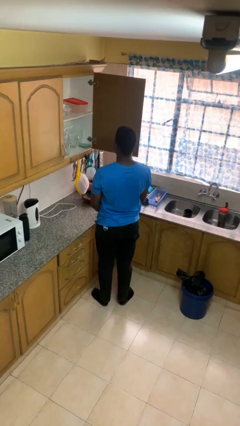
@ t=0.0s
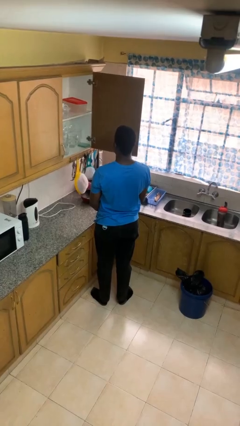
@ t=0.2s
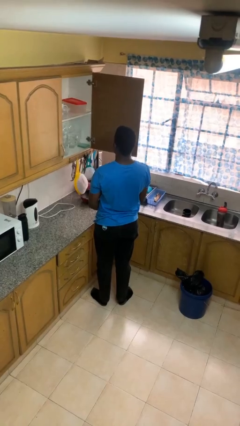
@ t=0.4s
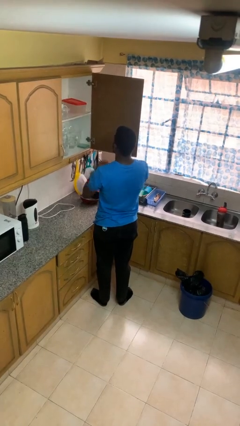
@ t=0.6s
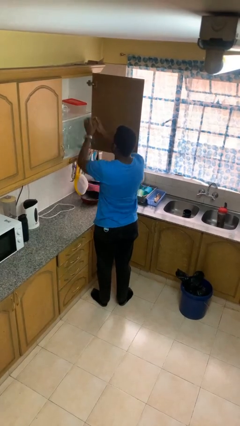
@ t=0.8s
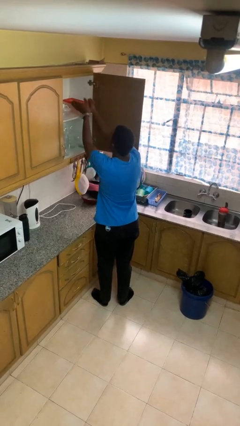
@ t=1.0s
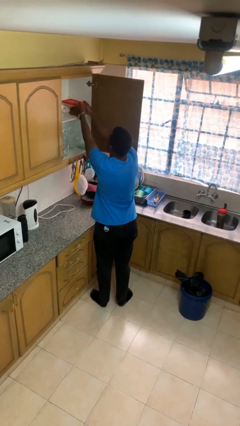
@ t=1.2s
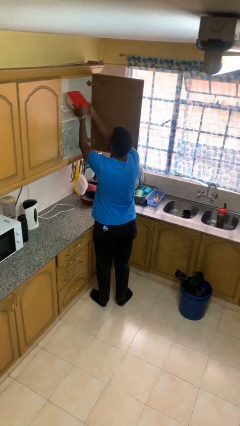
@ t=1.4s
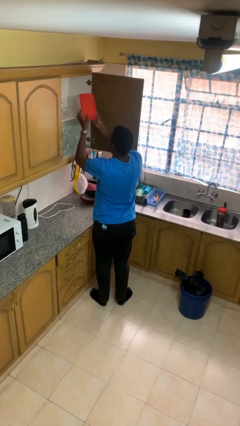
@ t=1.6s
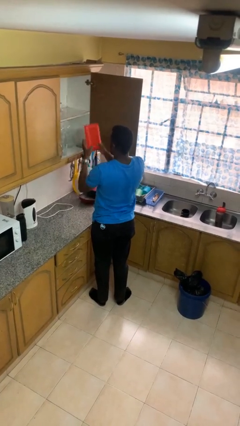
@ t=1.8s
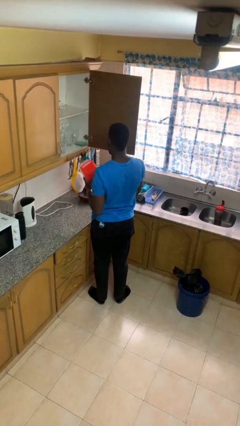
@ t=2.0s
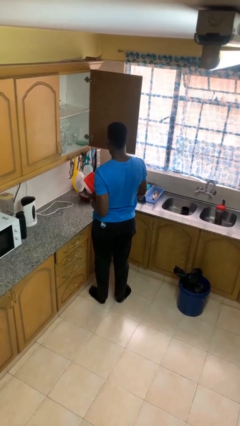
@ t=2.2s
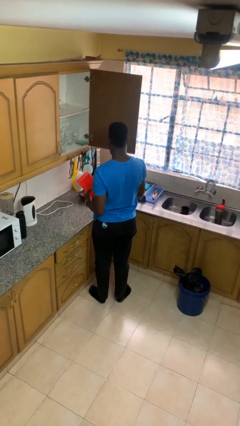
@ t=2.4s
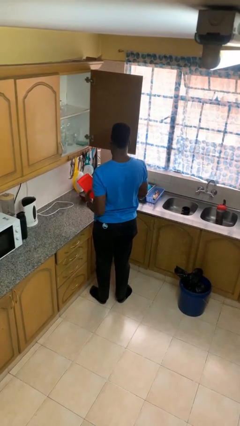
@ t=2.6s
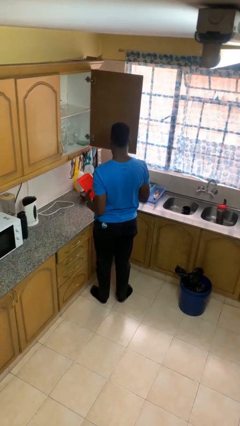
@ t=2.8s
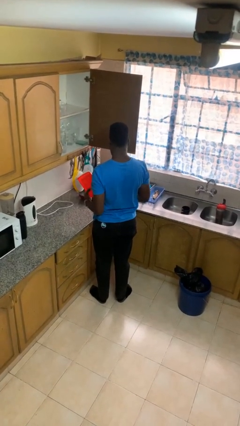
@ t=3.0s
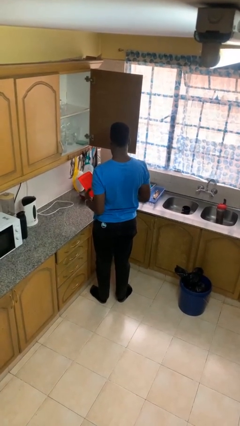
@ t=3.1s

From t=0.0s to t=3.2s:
person picks up object from cabinet

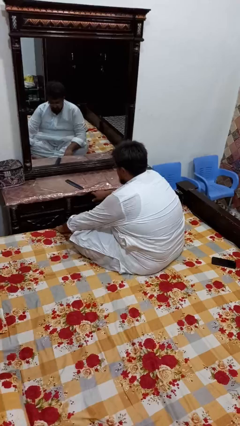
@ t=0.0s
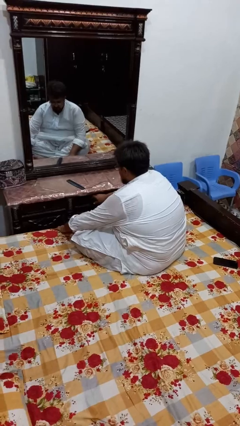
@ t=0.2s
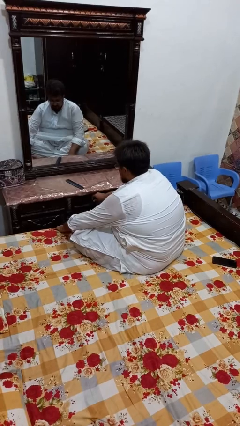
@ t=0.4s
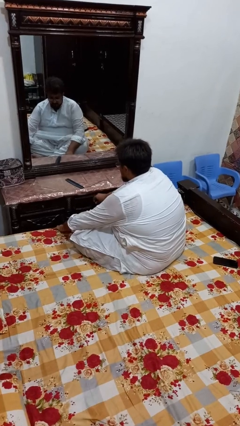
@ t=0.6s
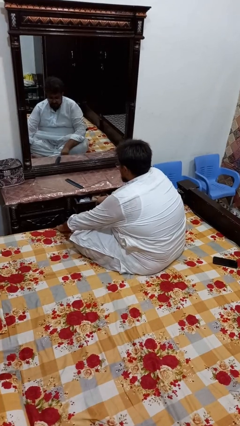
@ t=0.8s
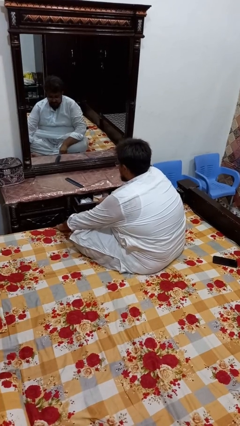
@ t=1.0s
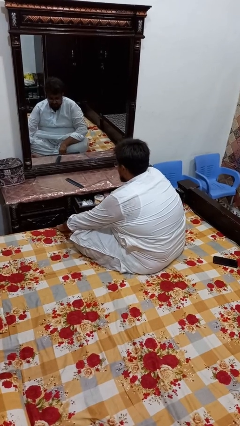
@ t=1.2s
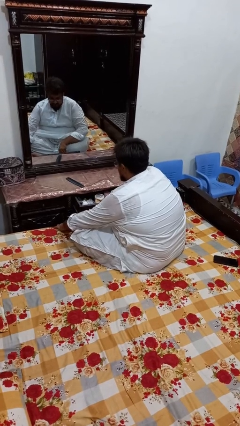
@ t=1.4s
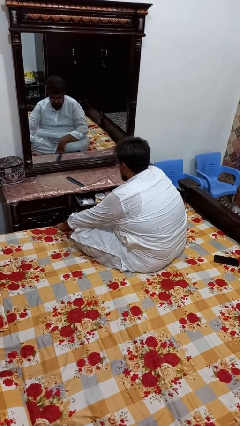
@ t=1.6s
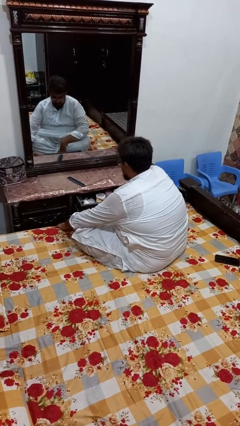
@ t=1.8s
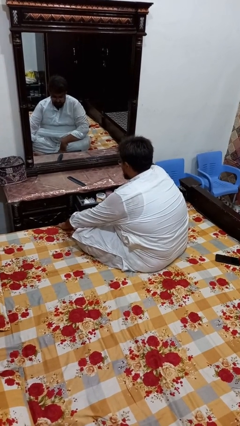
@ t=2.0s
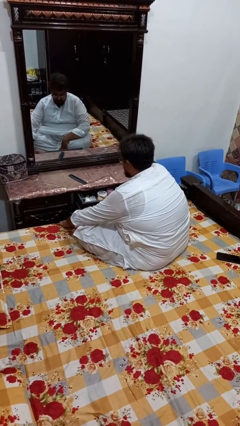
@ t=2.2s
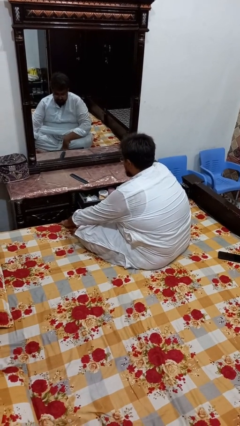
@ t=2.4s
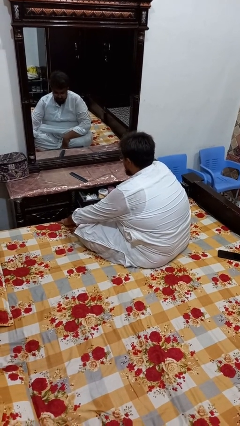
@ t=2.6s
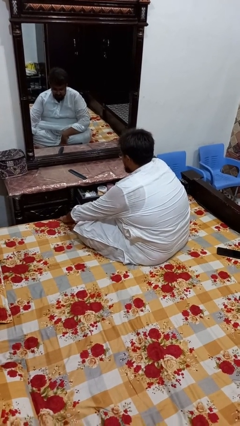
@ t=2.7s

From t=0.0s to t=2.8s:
person opens dresser drawer

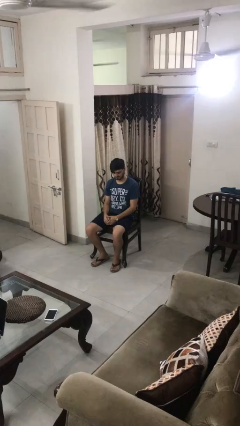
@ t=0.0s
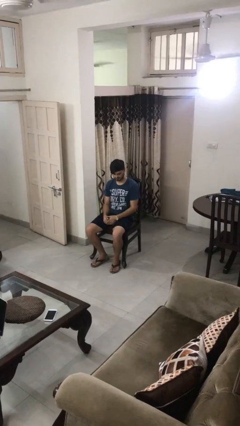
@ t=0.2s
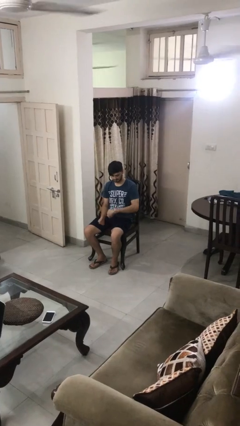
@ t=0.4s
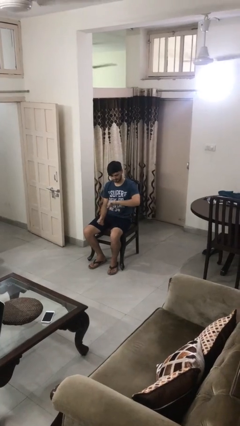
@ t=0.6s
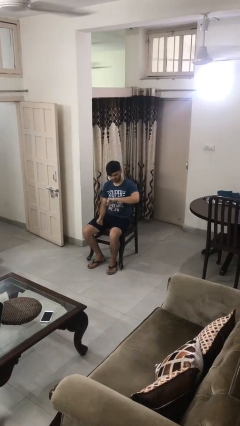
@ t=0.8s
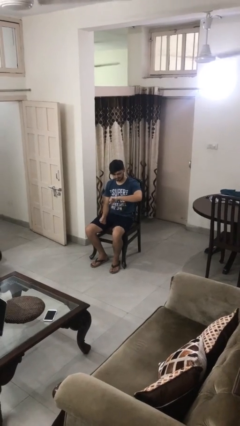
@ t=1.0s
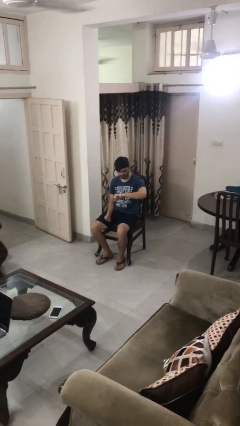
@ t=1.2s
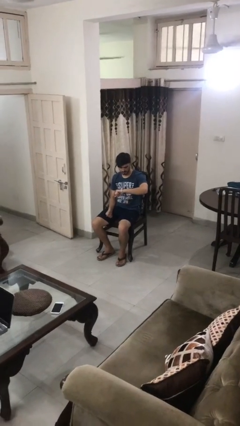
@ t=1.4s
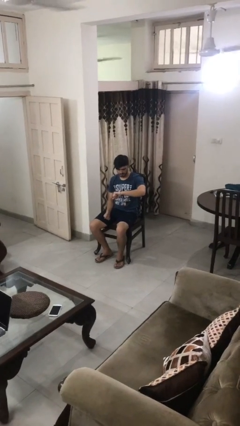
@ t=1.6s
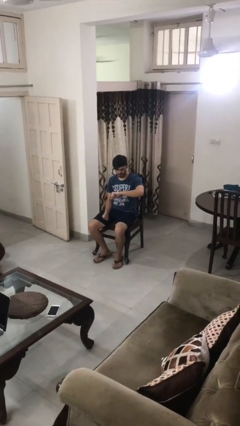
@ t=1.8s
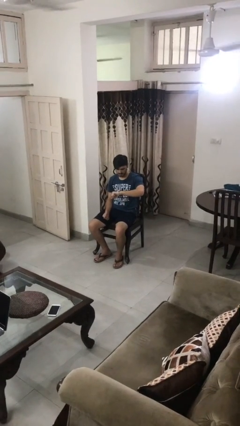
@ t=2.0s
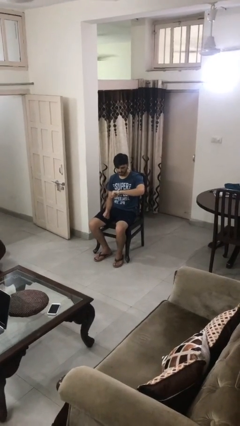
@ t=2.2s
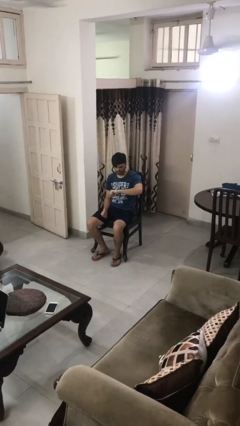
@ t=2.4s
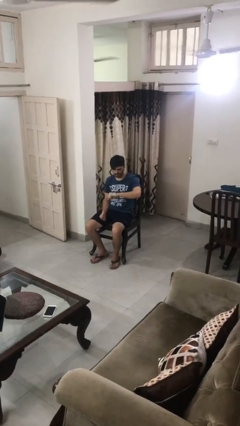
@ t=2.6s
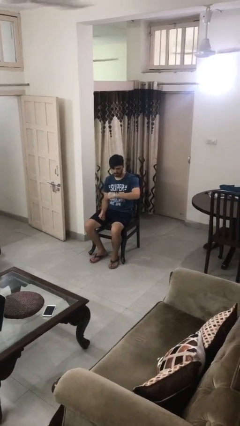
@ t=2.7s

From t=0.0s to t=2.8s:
person looks at wristwatch

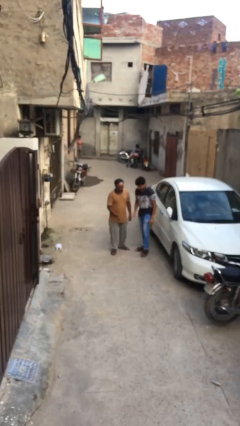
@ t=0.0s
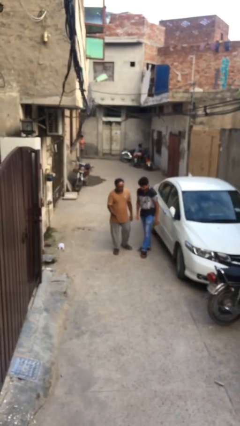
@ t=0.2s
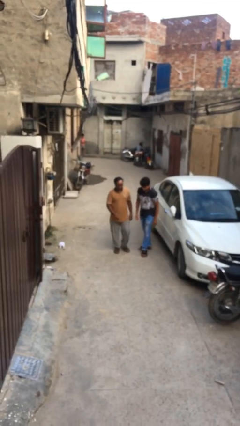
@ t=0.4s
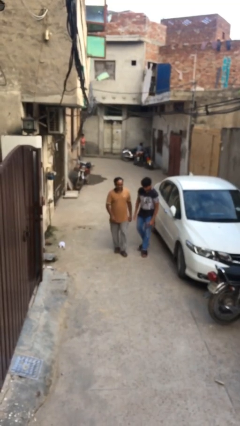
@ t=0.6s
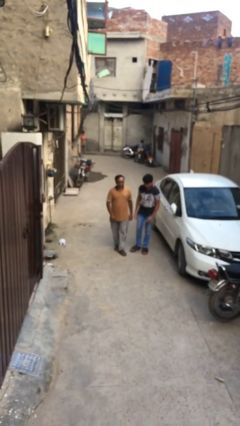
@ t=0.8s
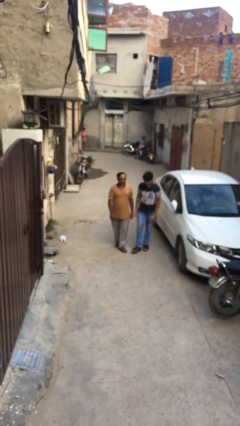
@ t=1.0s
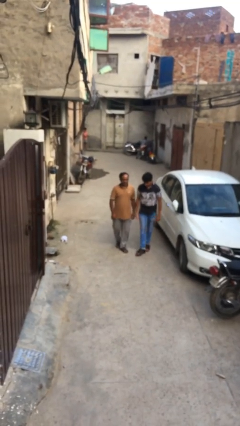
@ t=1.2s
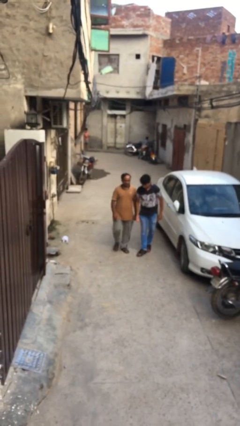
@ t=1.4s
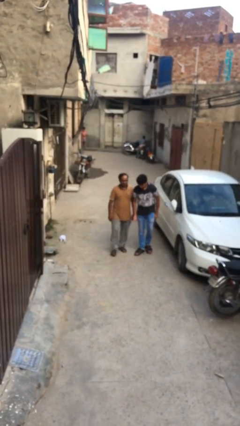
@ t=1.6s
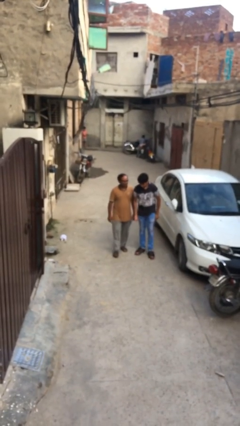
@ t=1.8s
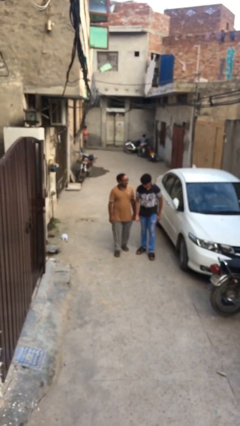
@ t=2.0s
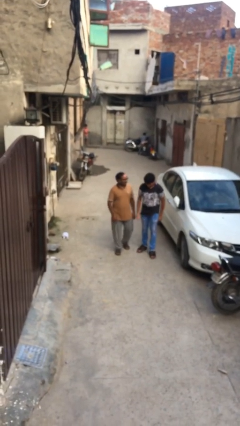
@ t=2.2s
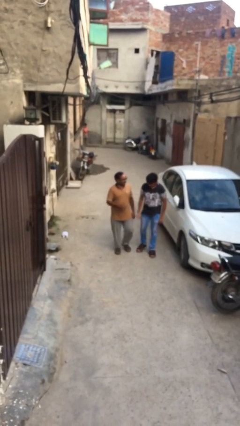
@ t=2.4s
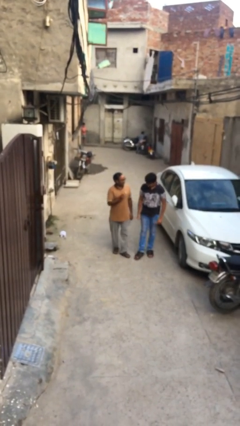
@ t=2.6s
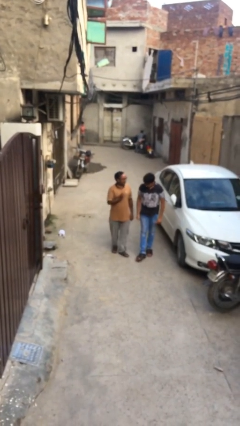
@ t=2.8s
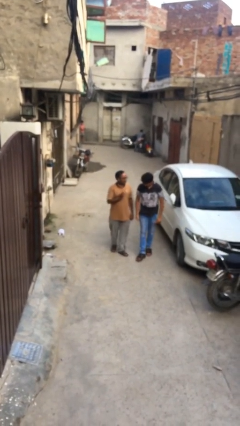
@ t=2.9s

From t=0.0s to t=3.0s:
person talks to person

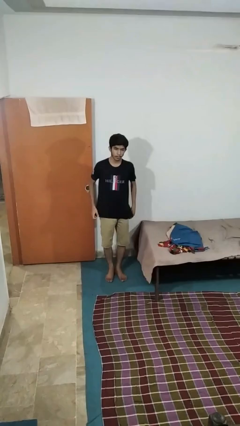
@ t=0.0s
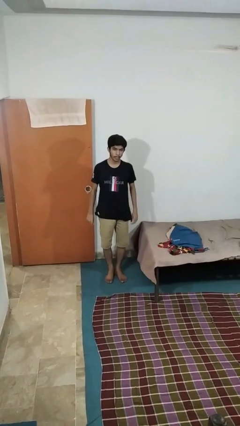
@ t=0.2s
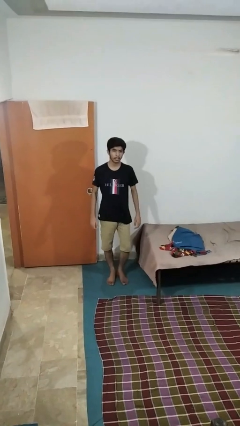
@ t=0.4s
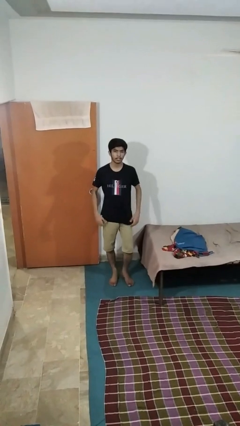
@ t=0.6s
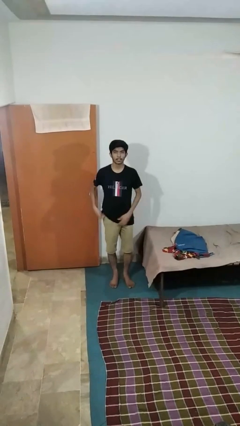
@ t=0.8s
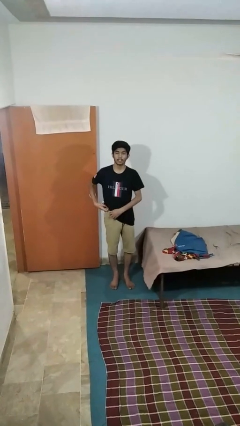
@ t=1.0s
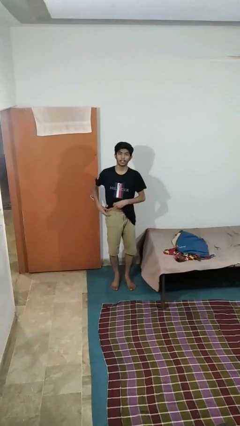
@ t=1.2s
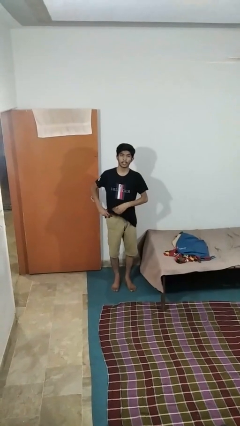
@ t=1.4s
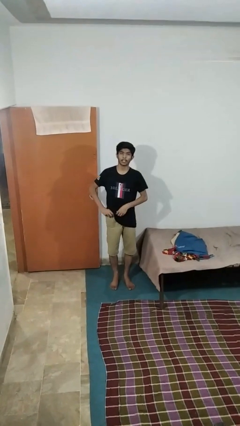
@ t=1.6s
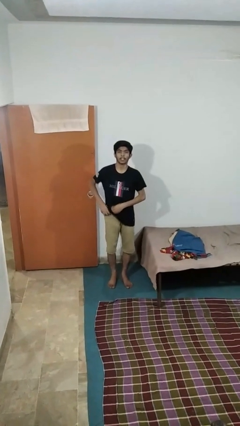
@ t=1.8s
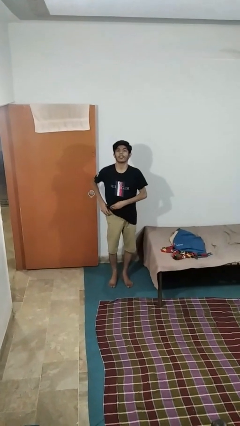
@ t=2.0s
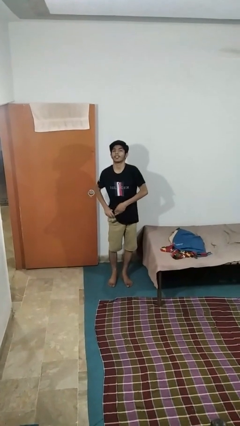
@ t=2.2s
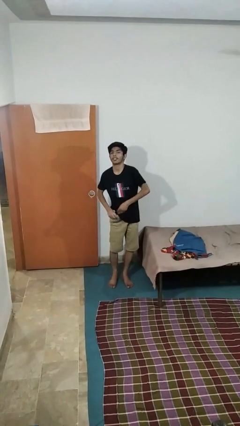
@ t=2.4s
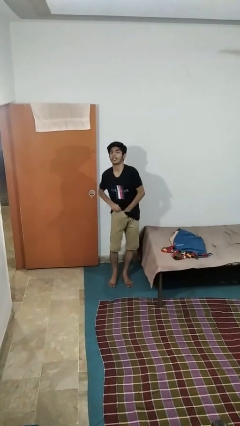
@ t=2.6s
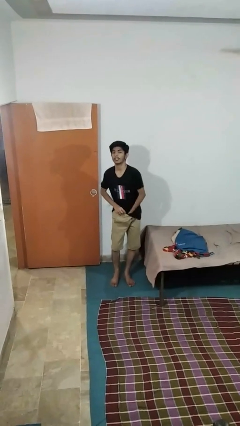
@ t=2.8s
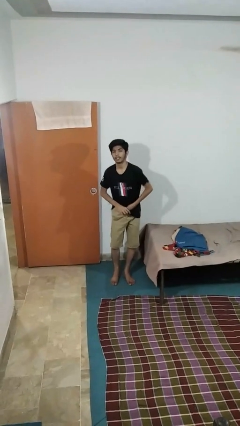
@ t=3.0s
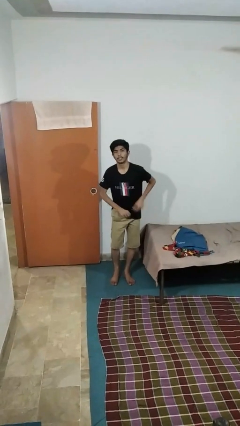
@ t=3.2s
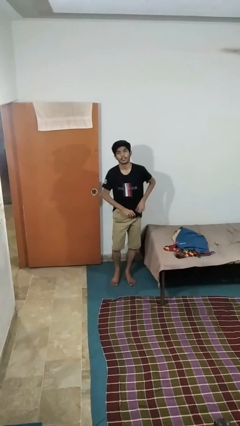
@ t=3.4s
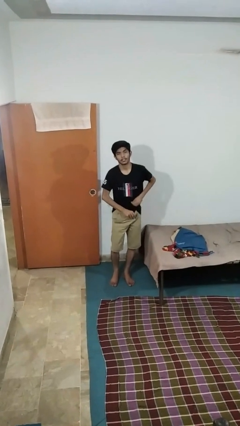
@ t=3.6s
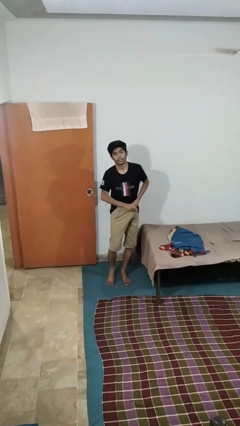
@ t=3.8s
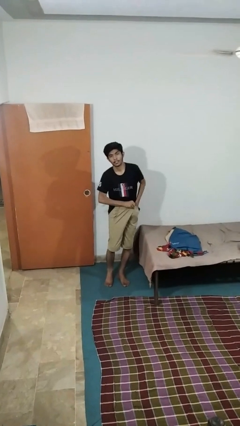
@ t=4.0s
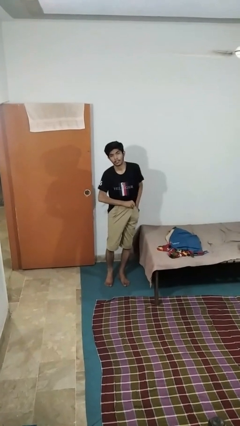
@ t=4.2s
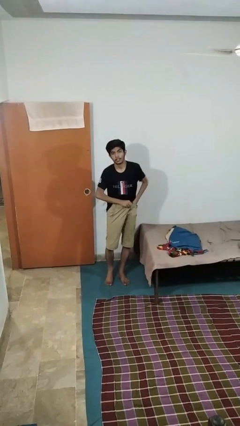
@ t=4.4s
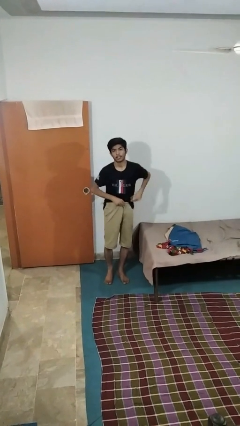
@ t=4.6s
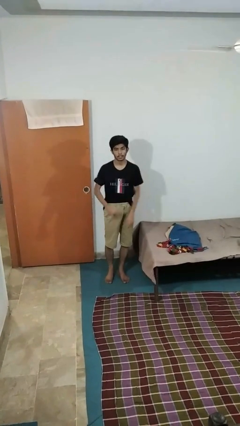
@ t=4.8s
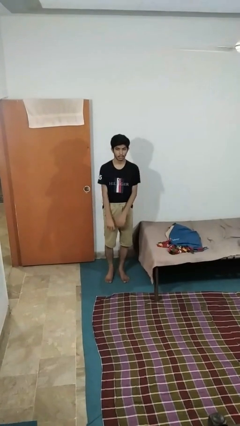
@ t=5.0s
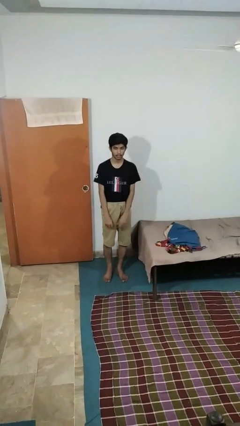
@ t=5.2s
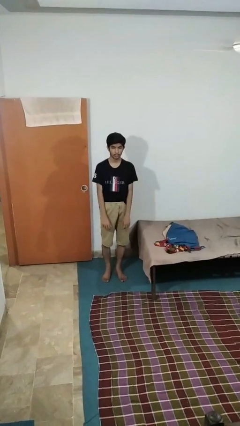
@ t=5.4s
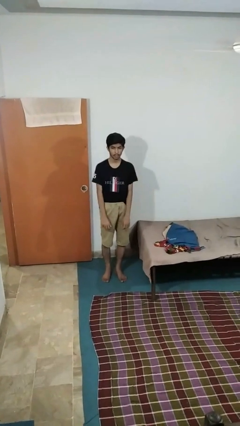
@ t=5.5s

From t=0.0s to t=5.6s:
person tucks in shirt

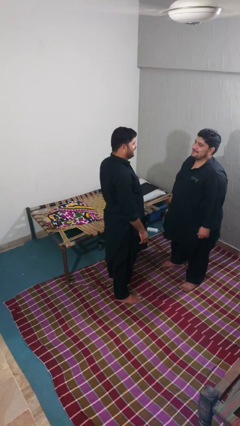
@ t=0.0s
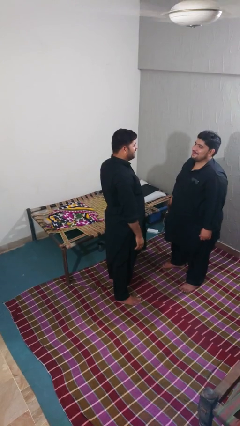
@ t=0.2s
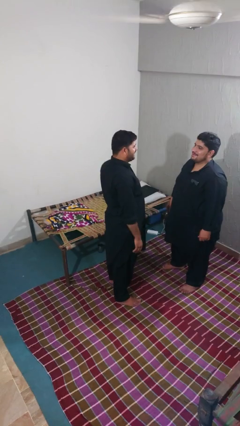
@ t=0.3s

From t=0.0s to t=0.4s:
person pounds shoulders of person
